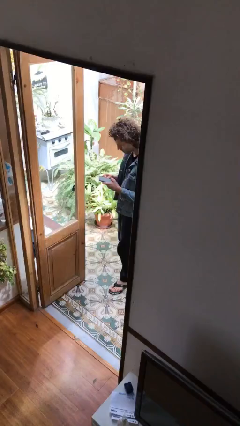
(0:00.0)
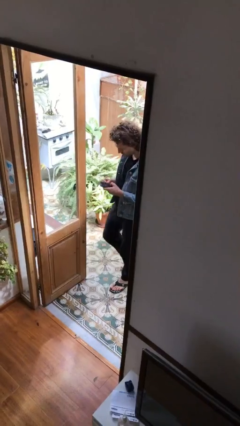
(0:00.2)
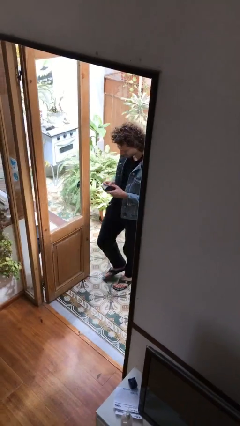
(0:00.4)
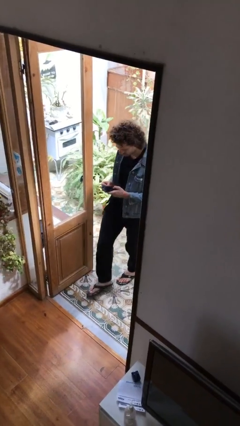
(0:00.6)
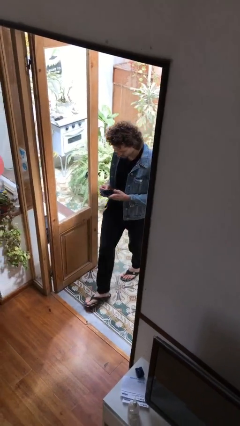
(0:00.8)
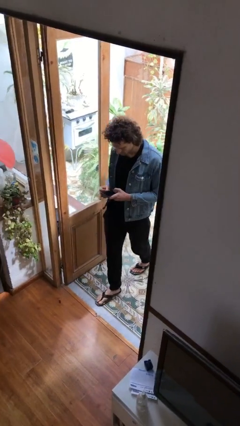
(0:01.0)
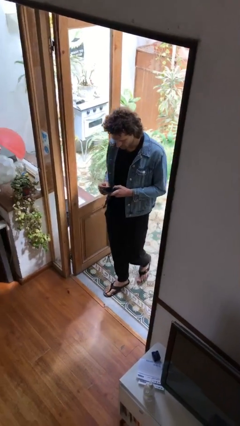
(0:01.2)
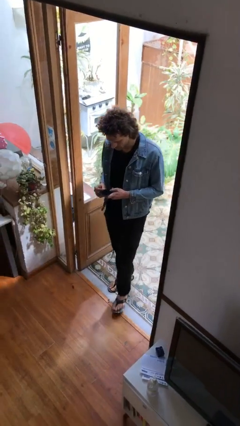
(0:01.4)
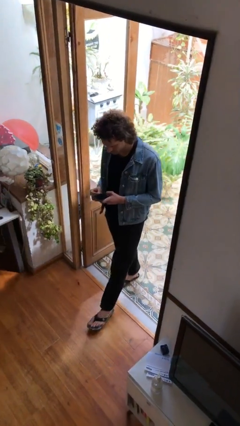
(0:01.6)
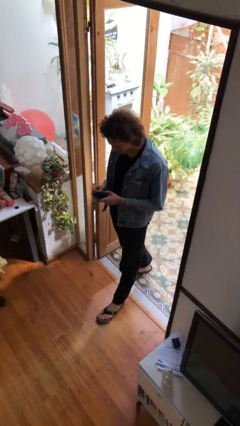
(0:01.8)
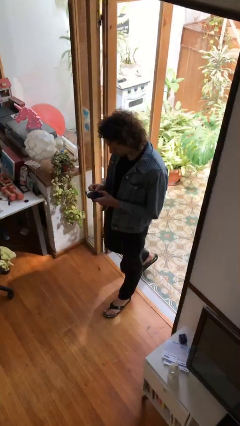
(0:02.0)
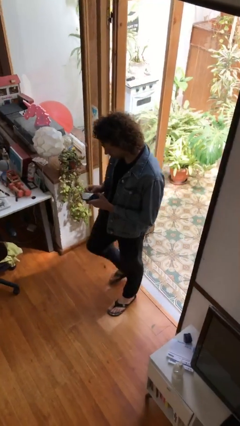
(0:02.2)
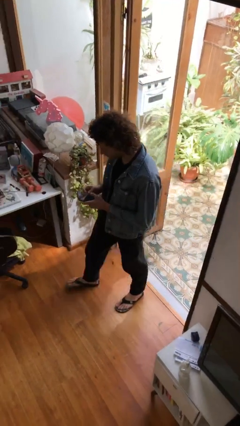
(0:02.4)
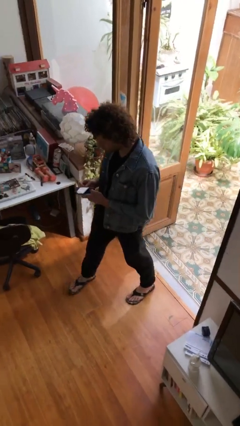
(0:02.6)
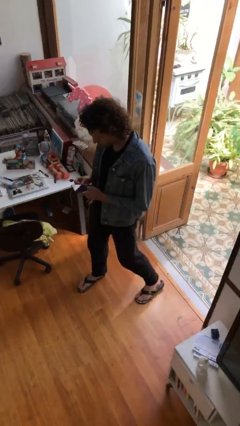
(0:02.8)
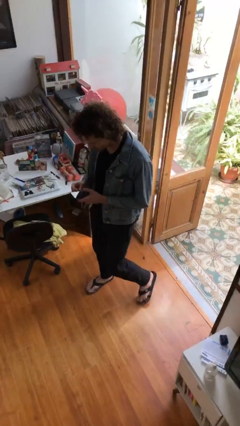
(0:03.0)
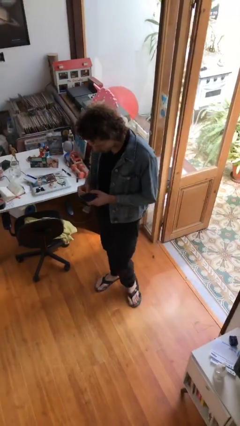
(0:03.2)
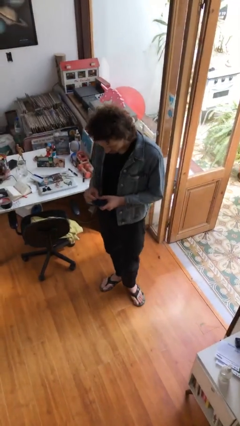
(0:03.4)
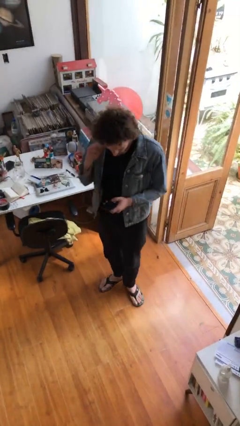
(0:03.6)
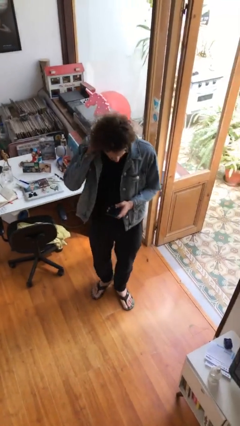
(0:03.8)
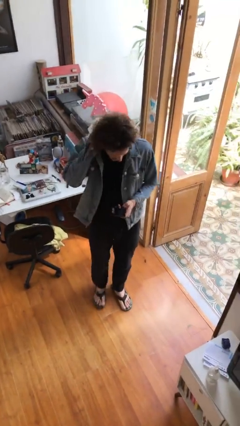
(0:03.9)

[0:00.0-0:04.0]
person enters scene through structure

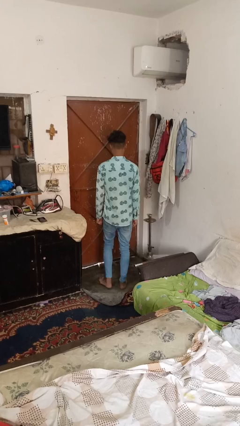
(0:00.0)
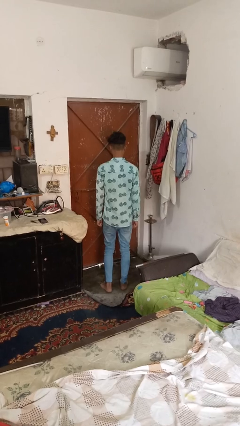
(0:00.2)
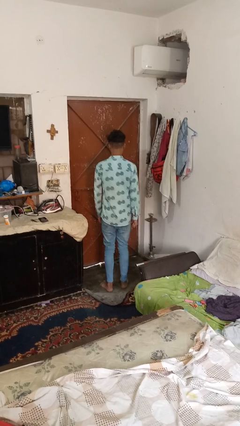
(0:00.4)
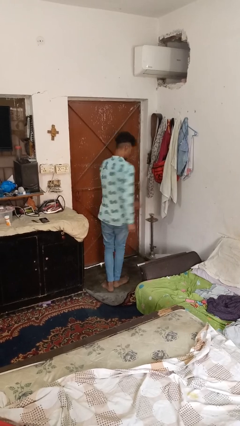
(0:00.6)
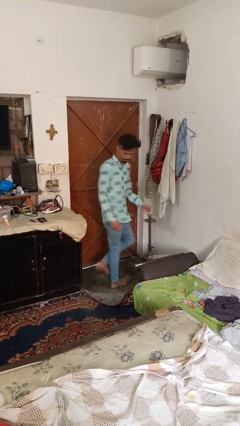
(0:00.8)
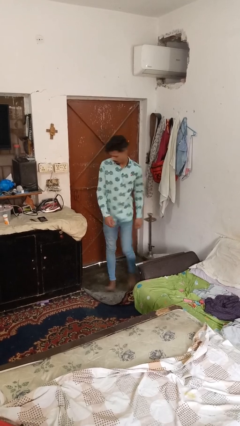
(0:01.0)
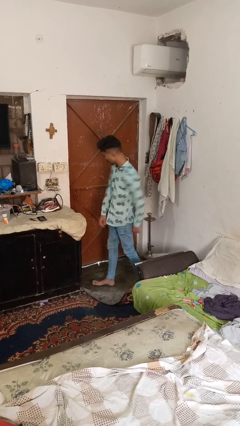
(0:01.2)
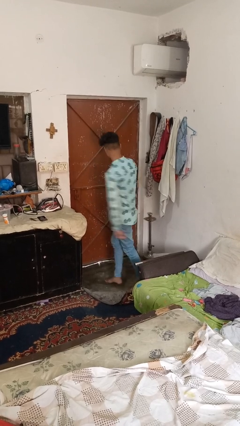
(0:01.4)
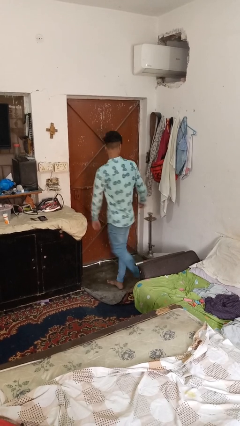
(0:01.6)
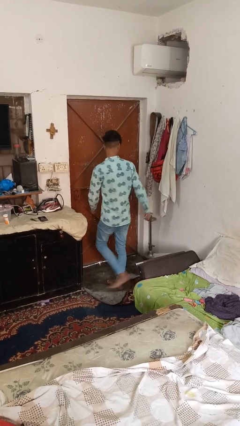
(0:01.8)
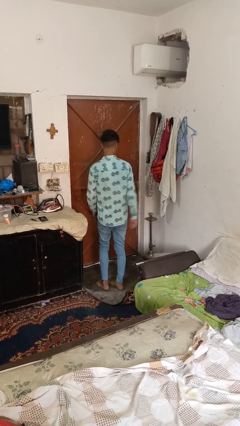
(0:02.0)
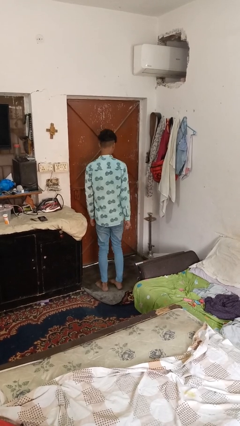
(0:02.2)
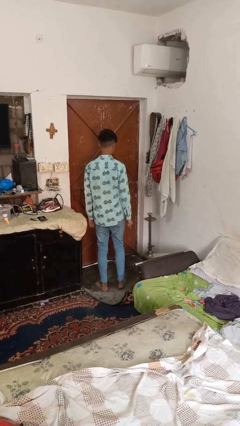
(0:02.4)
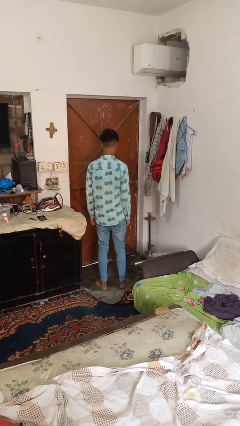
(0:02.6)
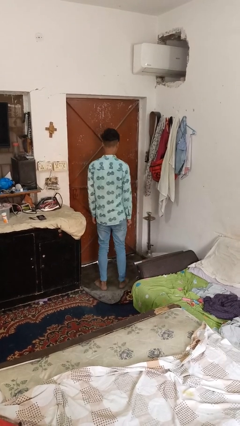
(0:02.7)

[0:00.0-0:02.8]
person twirls

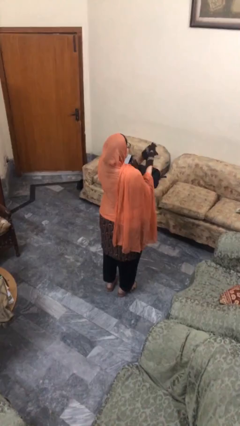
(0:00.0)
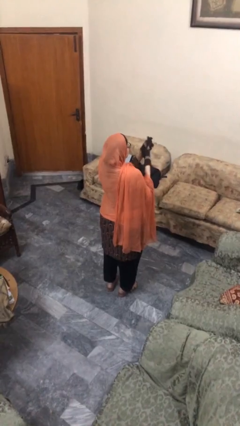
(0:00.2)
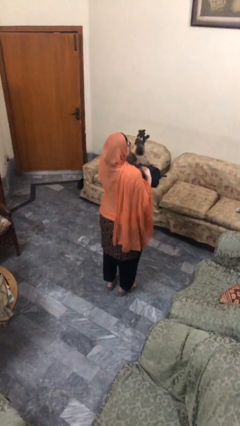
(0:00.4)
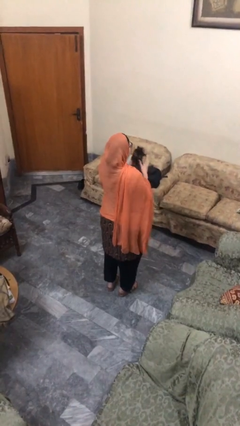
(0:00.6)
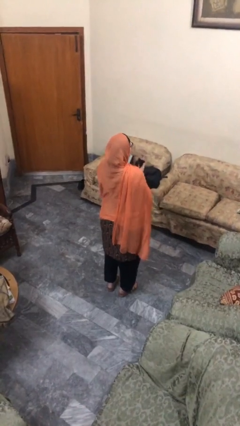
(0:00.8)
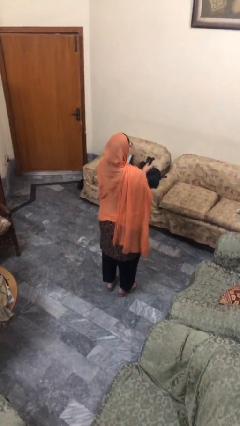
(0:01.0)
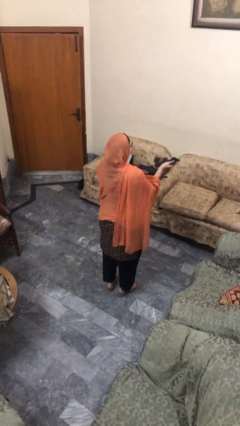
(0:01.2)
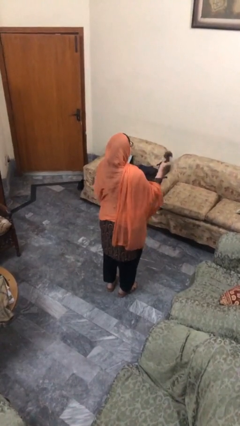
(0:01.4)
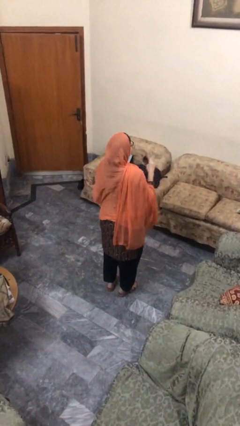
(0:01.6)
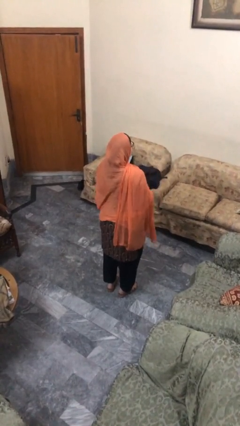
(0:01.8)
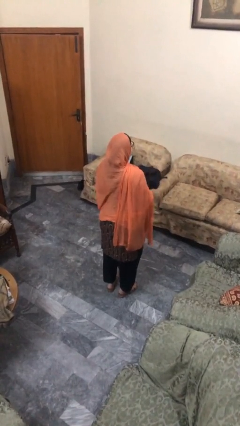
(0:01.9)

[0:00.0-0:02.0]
person takes off gloves

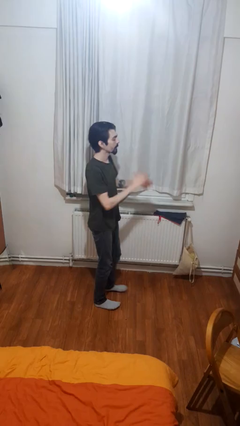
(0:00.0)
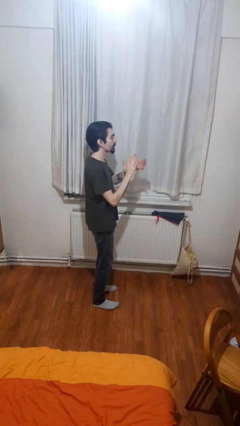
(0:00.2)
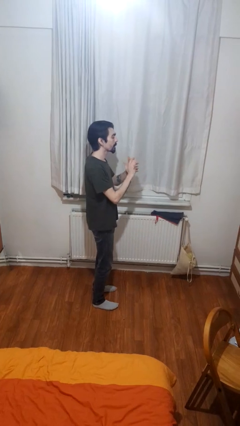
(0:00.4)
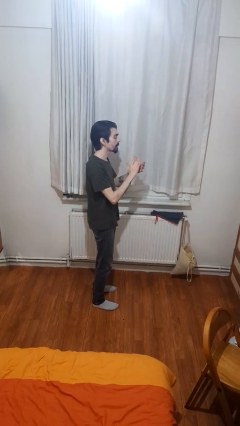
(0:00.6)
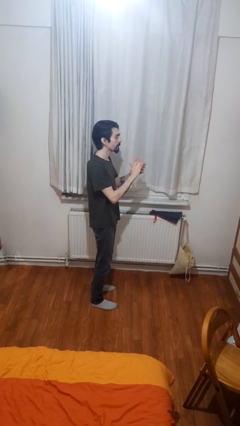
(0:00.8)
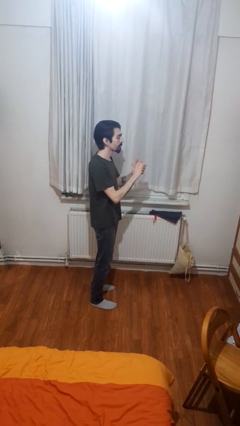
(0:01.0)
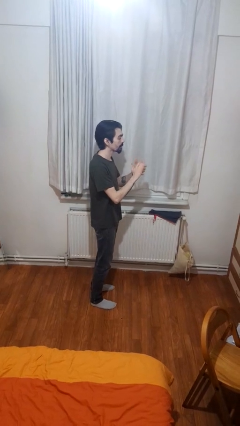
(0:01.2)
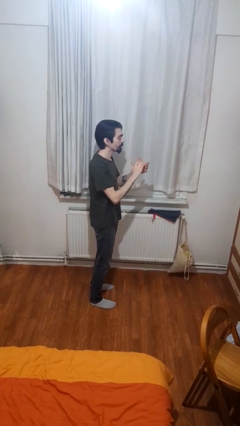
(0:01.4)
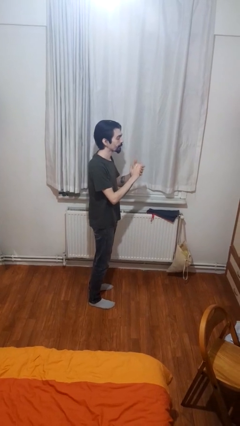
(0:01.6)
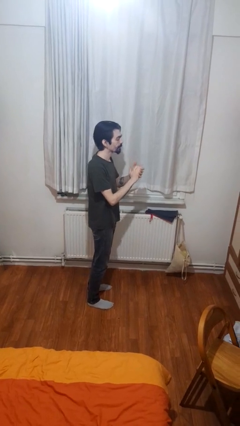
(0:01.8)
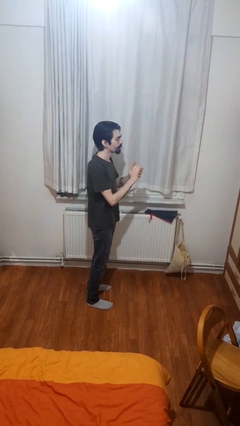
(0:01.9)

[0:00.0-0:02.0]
person claps hands

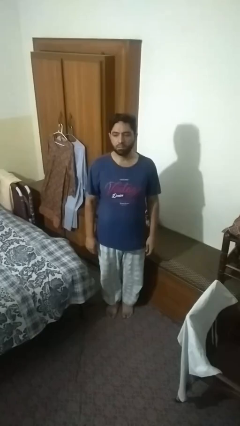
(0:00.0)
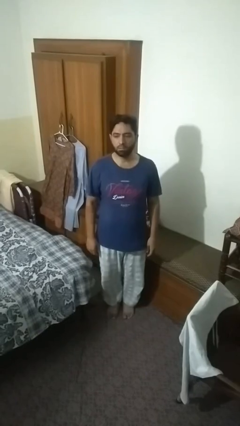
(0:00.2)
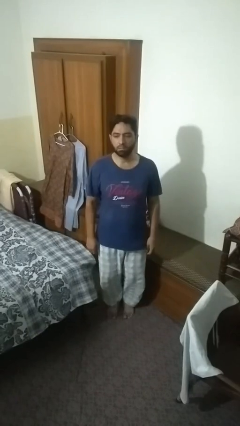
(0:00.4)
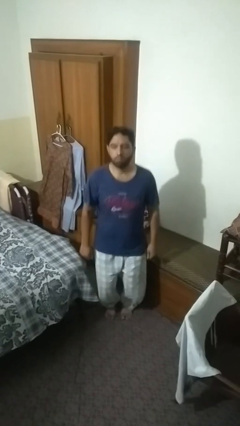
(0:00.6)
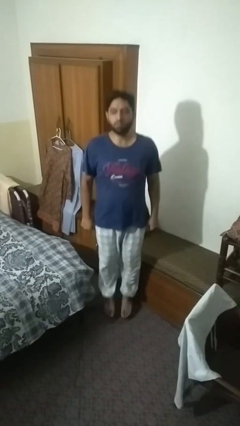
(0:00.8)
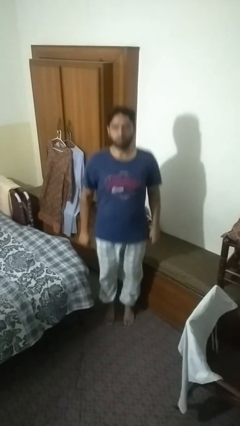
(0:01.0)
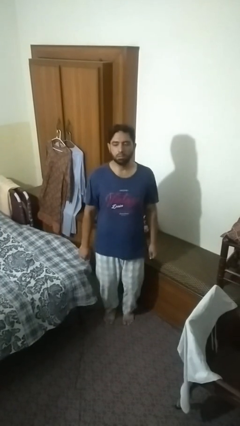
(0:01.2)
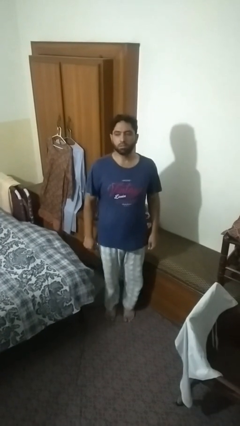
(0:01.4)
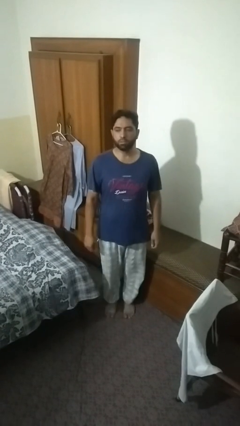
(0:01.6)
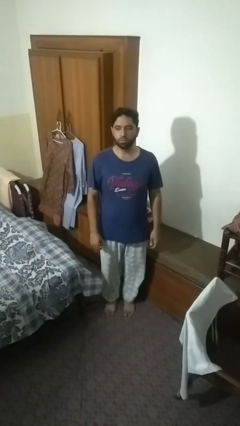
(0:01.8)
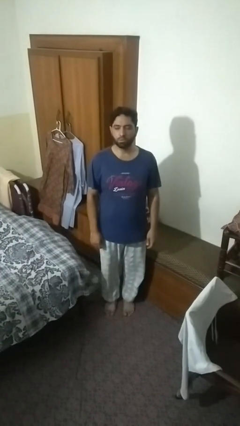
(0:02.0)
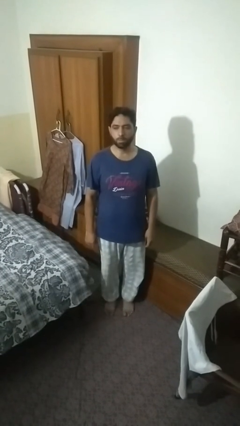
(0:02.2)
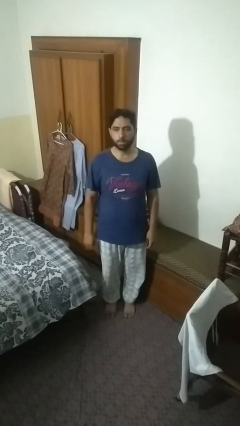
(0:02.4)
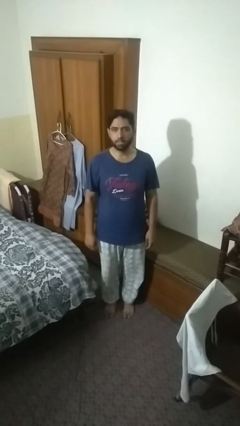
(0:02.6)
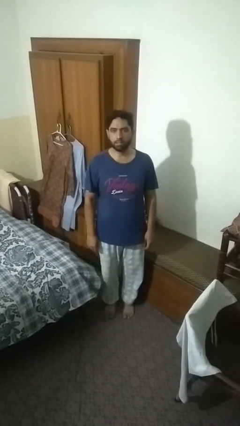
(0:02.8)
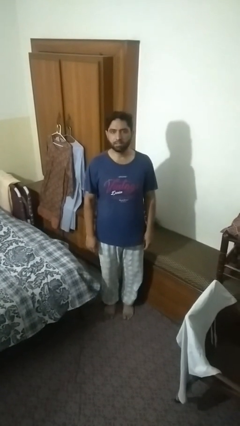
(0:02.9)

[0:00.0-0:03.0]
person jumps

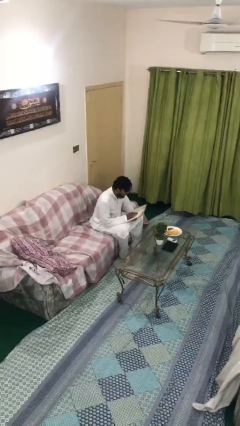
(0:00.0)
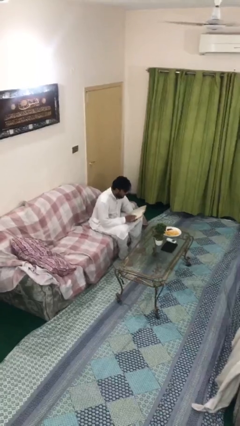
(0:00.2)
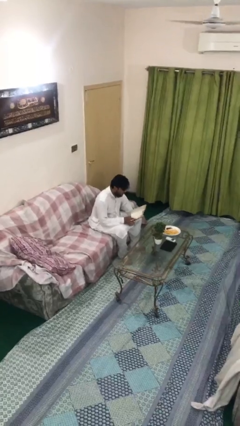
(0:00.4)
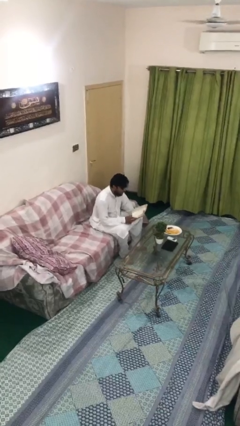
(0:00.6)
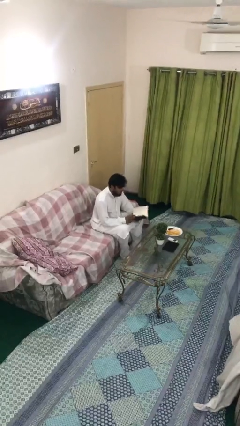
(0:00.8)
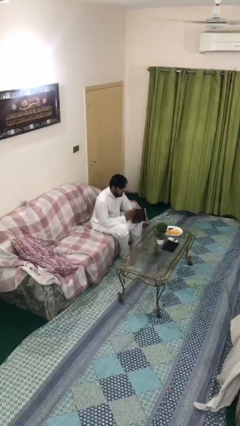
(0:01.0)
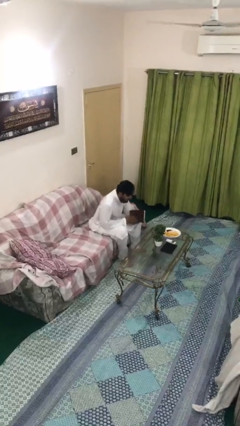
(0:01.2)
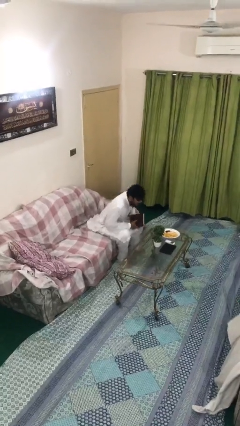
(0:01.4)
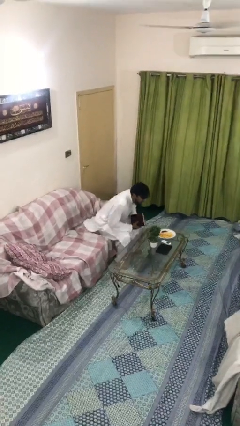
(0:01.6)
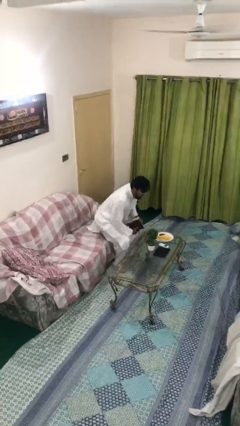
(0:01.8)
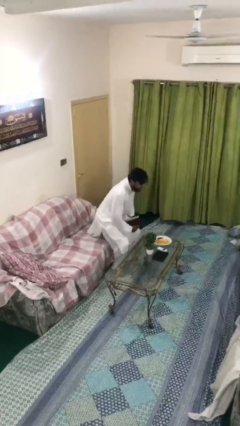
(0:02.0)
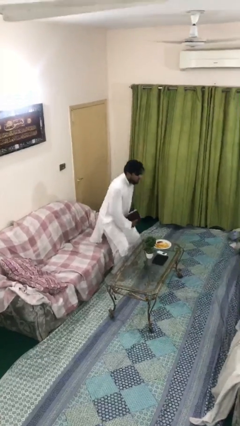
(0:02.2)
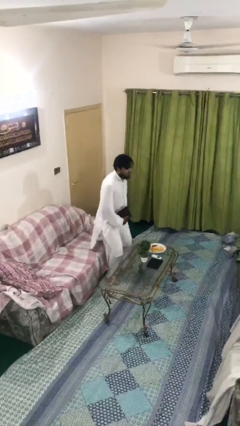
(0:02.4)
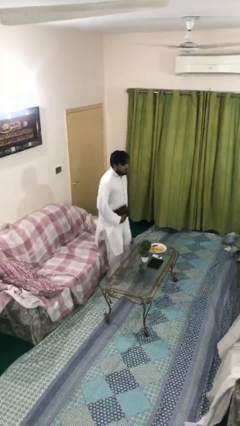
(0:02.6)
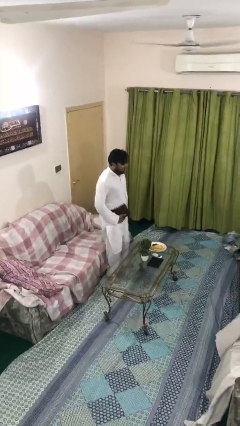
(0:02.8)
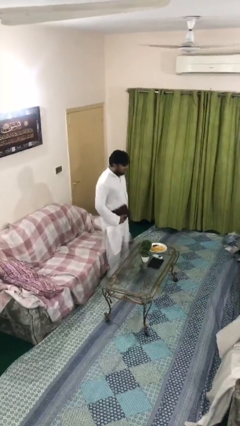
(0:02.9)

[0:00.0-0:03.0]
person stands up

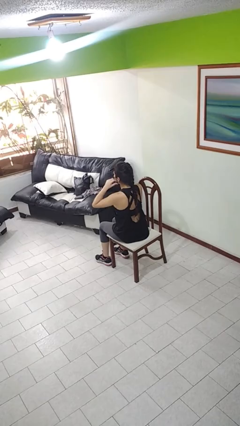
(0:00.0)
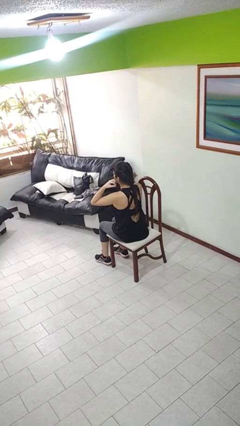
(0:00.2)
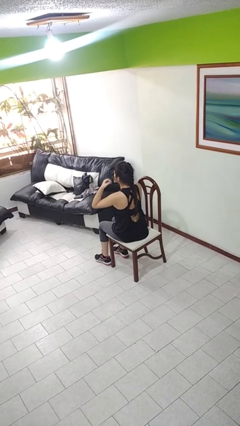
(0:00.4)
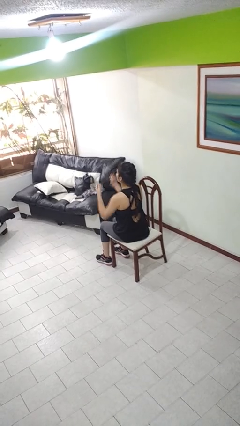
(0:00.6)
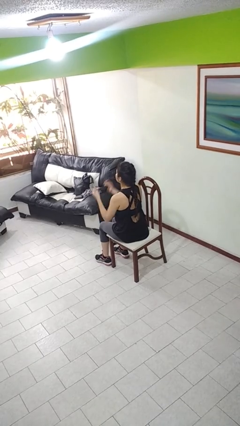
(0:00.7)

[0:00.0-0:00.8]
person takes off facemask
